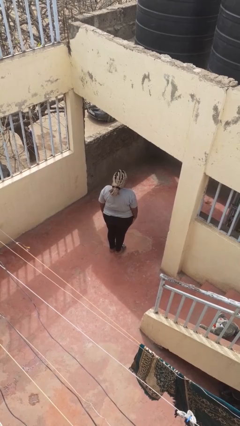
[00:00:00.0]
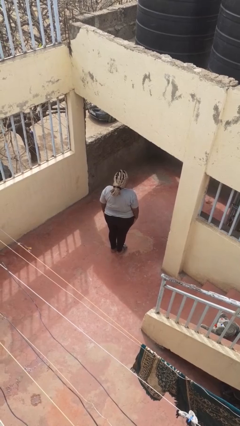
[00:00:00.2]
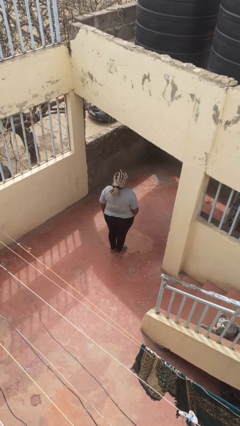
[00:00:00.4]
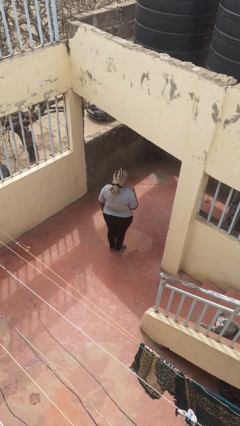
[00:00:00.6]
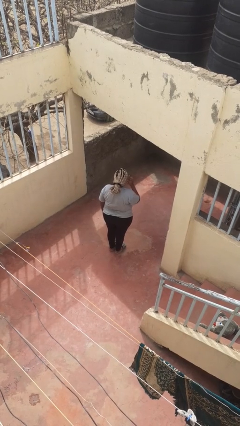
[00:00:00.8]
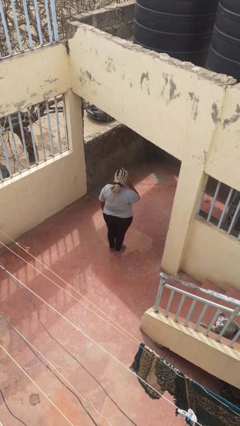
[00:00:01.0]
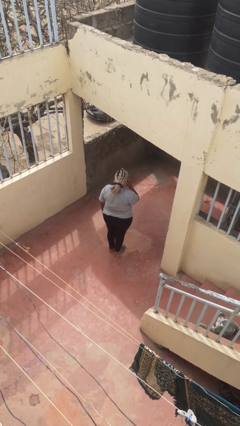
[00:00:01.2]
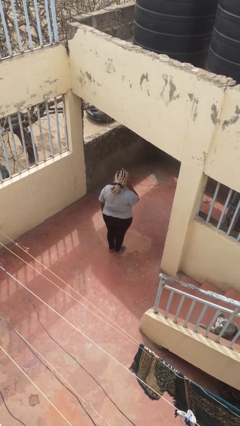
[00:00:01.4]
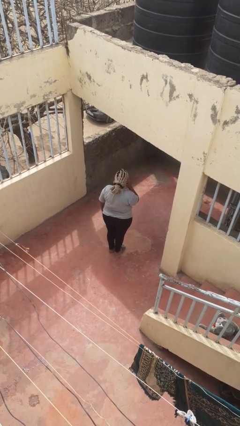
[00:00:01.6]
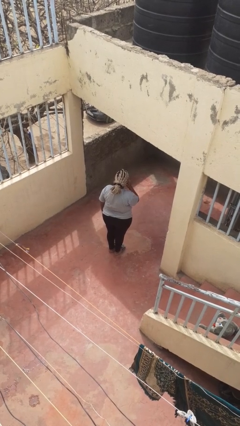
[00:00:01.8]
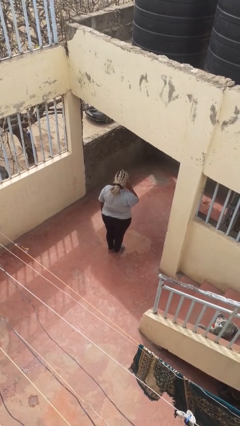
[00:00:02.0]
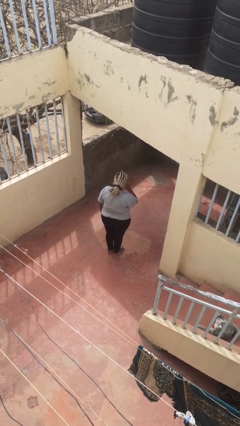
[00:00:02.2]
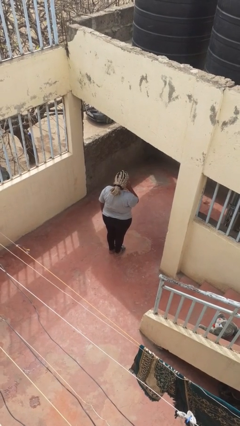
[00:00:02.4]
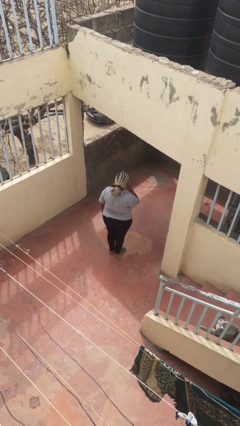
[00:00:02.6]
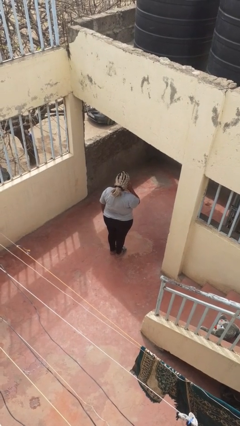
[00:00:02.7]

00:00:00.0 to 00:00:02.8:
person gestures listen closely

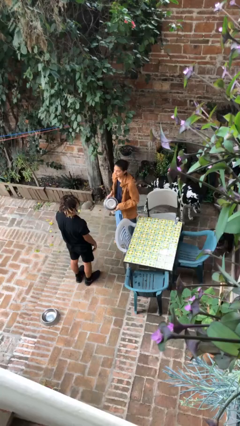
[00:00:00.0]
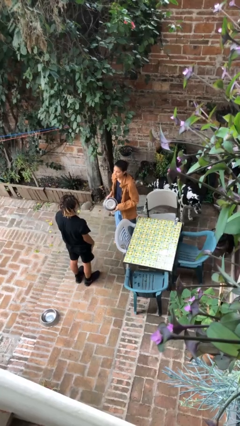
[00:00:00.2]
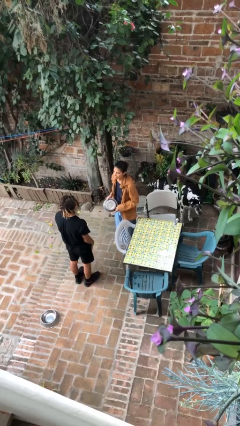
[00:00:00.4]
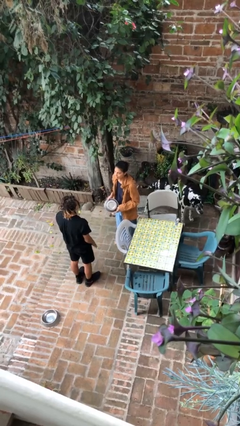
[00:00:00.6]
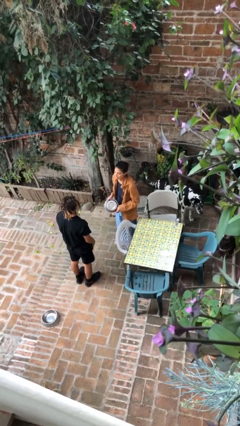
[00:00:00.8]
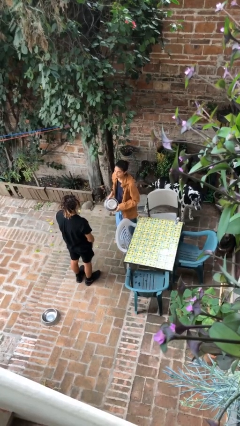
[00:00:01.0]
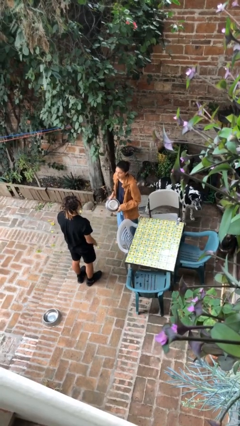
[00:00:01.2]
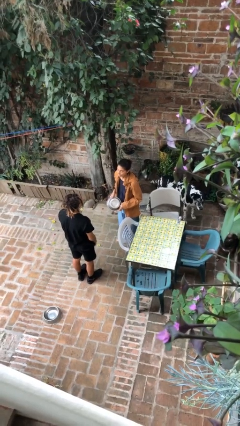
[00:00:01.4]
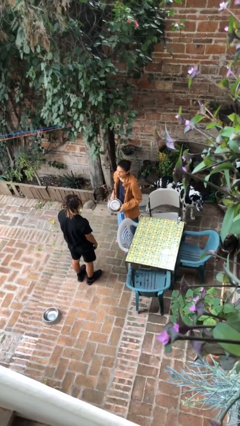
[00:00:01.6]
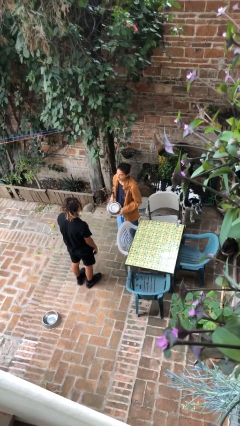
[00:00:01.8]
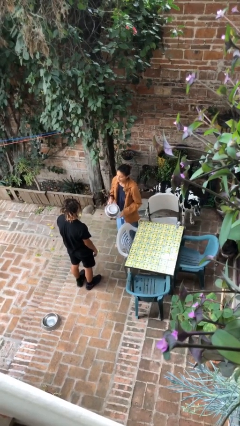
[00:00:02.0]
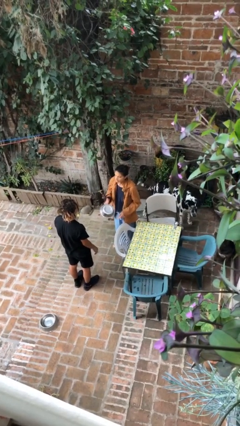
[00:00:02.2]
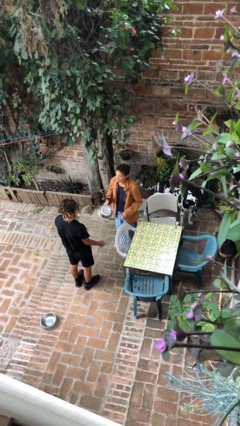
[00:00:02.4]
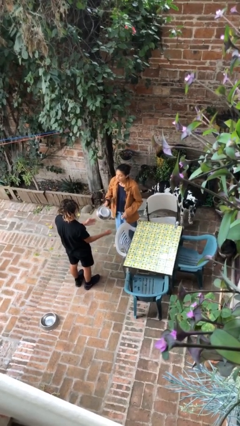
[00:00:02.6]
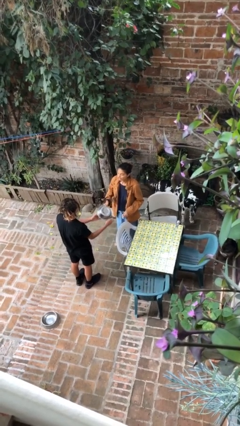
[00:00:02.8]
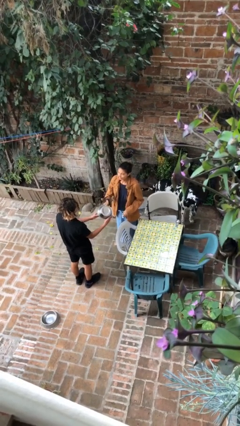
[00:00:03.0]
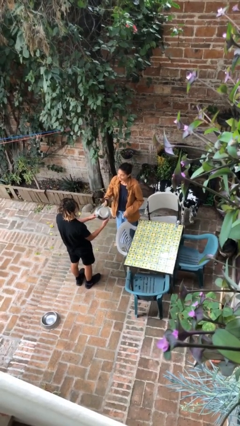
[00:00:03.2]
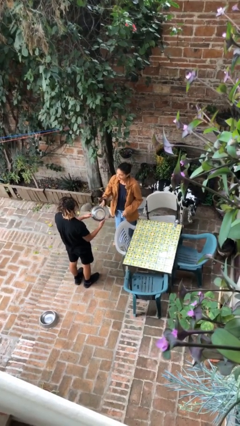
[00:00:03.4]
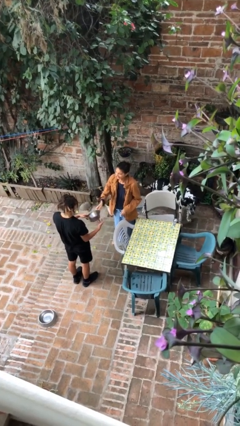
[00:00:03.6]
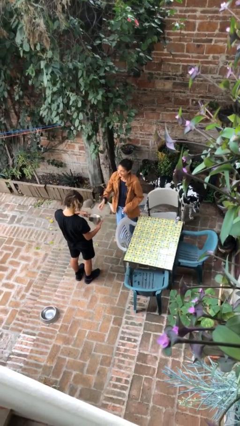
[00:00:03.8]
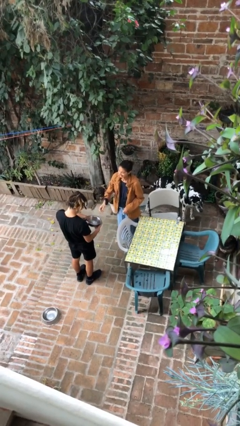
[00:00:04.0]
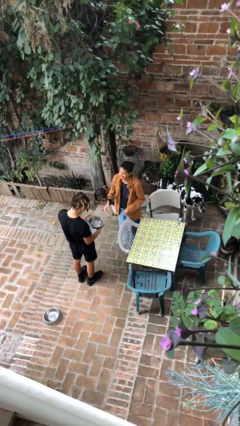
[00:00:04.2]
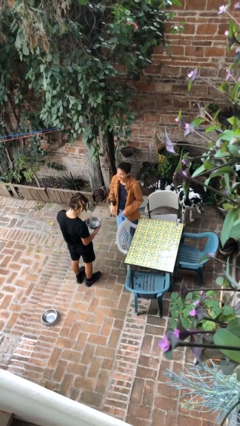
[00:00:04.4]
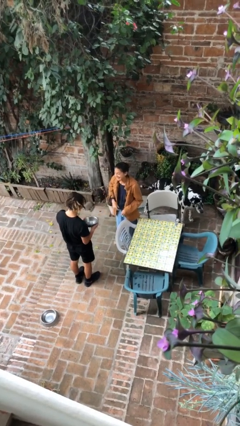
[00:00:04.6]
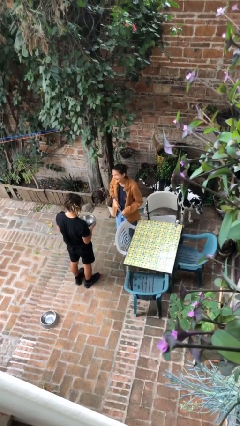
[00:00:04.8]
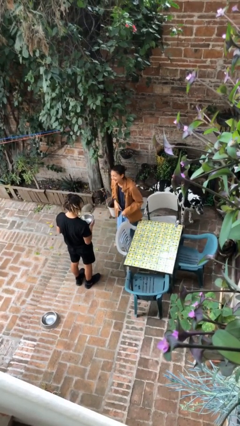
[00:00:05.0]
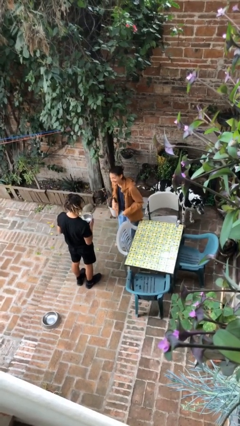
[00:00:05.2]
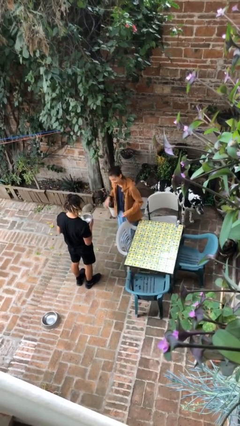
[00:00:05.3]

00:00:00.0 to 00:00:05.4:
person transfers object to person

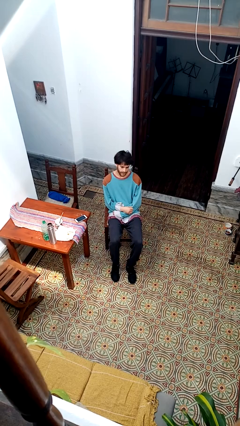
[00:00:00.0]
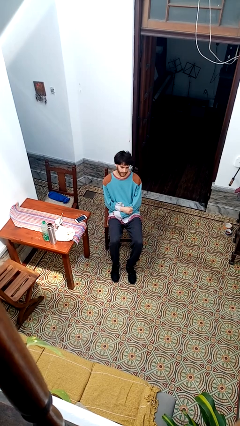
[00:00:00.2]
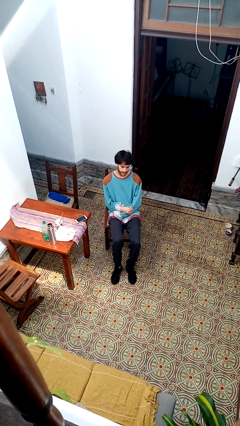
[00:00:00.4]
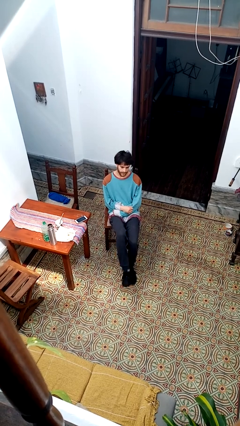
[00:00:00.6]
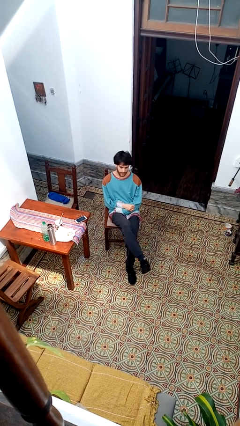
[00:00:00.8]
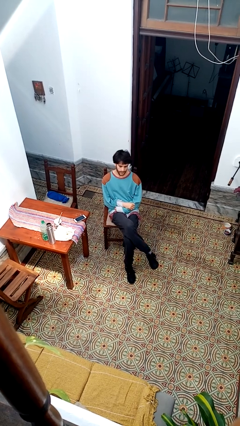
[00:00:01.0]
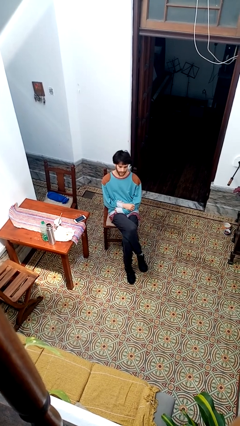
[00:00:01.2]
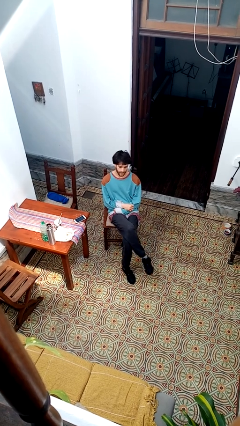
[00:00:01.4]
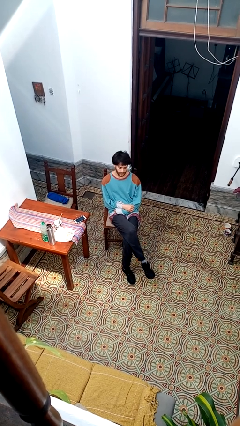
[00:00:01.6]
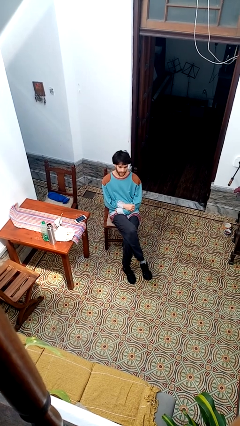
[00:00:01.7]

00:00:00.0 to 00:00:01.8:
person crosses legs

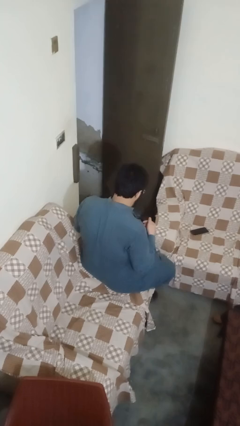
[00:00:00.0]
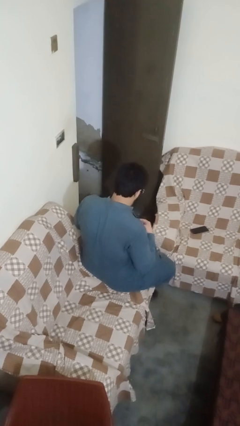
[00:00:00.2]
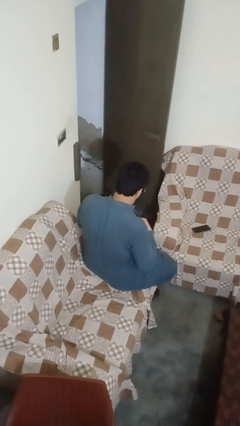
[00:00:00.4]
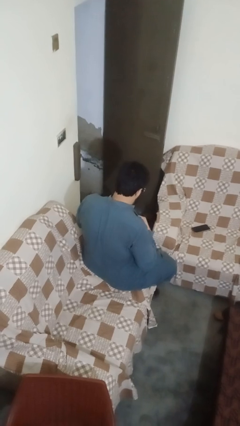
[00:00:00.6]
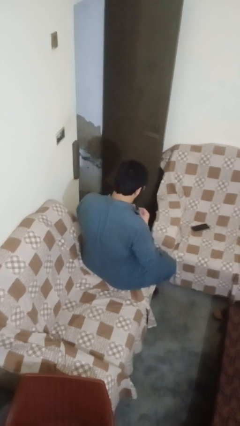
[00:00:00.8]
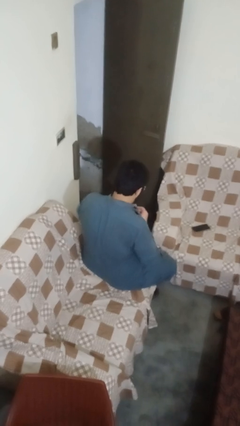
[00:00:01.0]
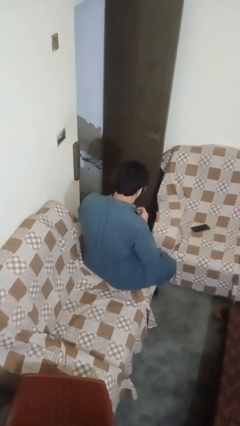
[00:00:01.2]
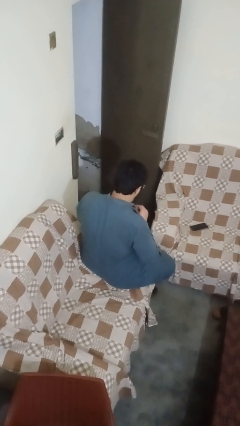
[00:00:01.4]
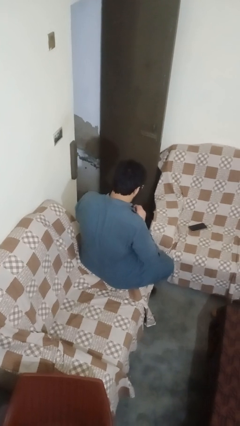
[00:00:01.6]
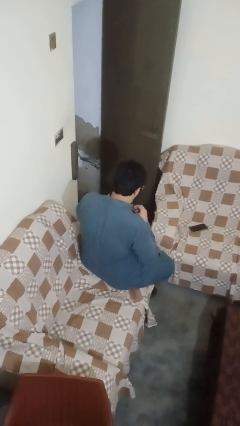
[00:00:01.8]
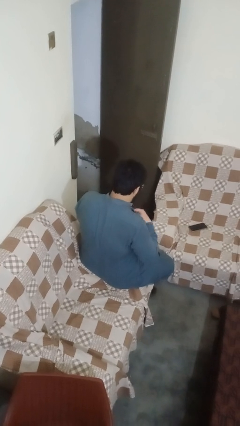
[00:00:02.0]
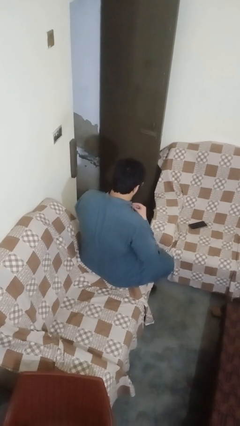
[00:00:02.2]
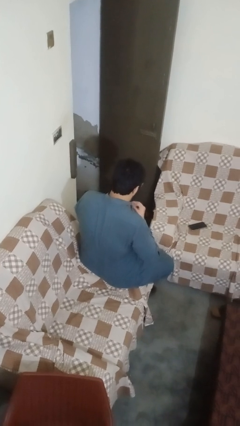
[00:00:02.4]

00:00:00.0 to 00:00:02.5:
person buttons shirt

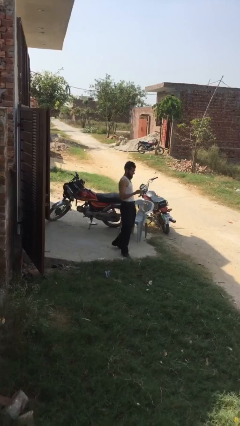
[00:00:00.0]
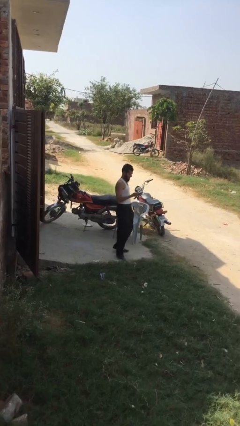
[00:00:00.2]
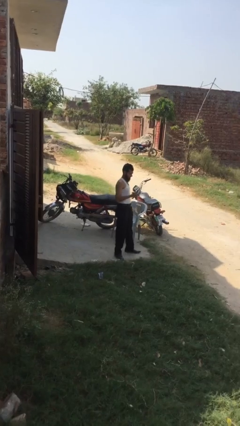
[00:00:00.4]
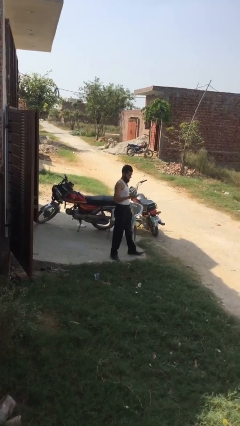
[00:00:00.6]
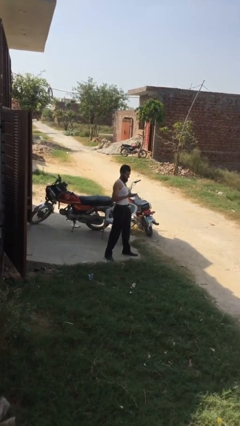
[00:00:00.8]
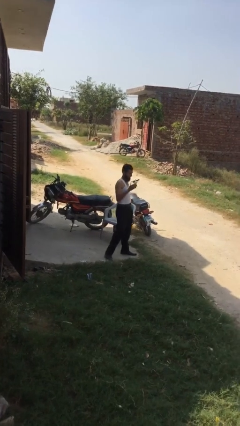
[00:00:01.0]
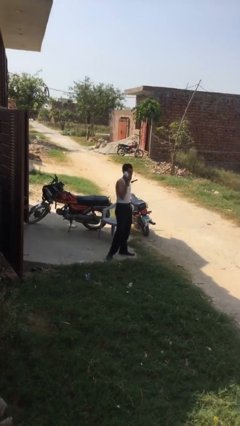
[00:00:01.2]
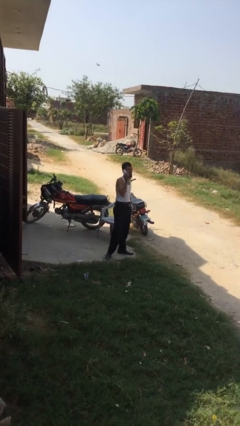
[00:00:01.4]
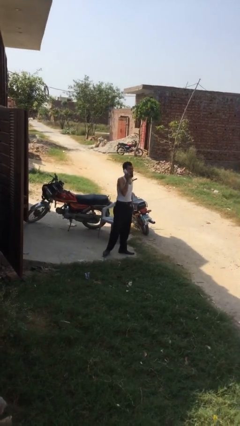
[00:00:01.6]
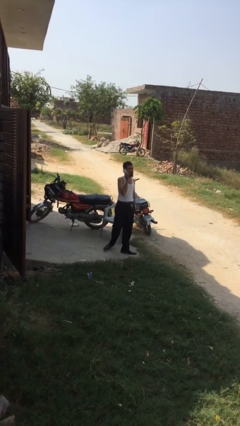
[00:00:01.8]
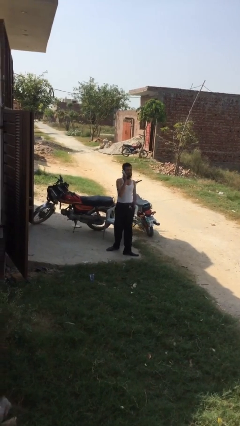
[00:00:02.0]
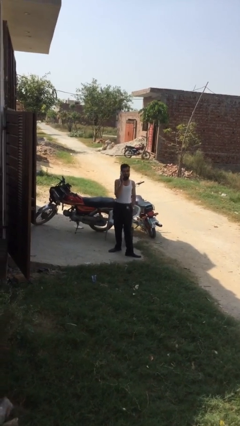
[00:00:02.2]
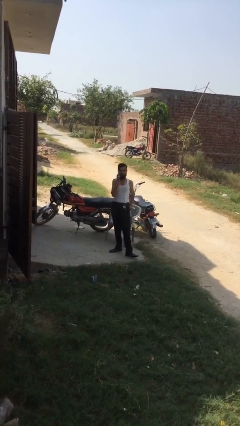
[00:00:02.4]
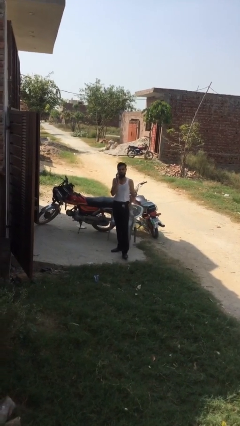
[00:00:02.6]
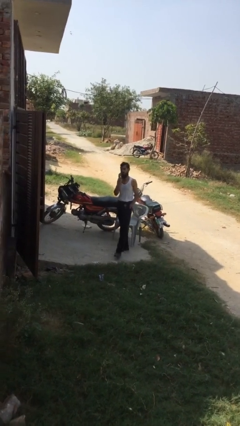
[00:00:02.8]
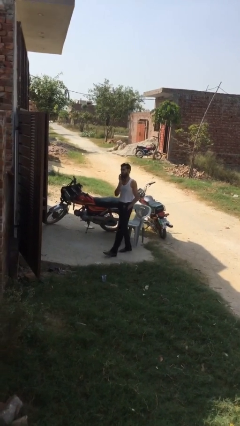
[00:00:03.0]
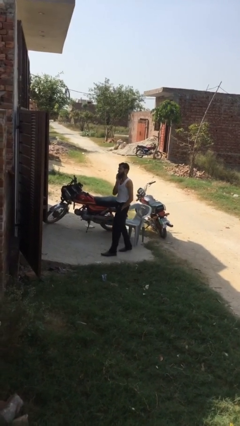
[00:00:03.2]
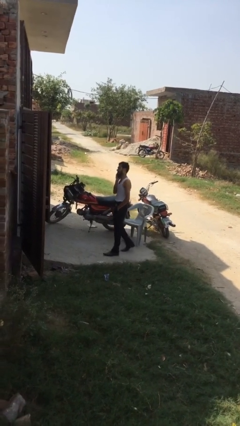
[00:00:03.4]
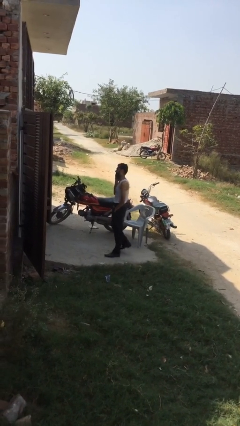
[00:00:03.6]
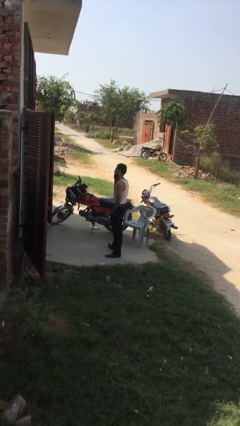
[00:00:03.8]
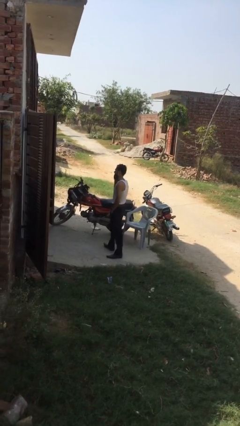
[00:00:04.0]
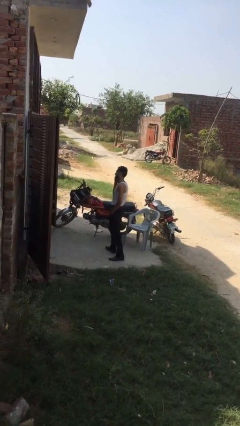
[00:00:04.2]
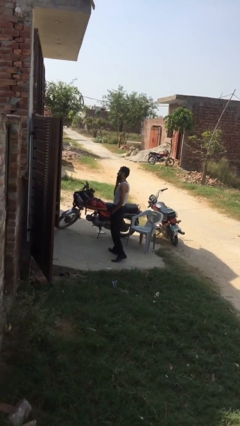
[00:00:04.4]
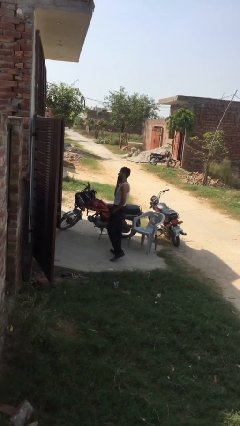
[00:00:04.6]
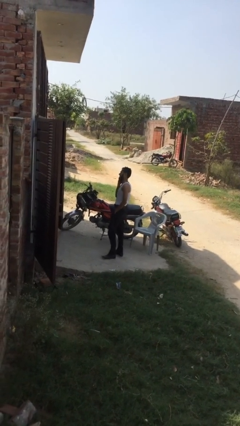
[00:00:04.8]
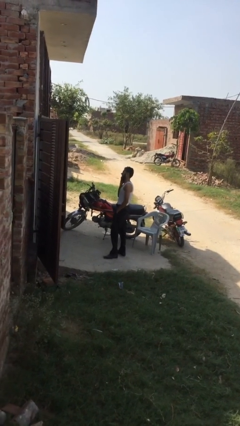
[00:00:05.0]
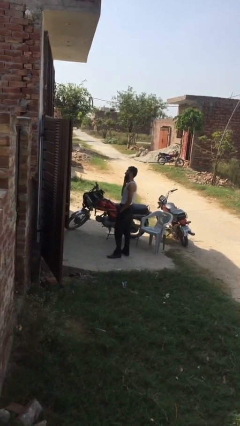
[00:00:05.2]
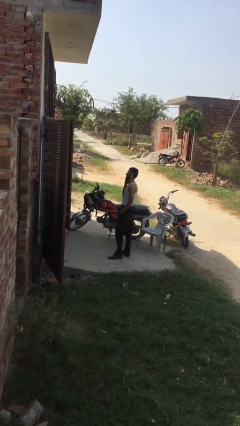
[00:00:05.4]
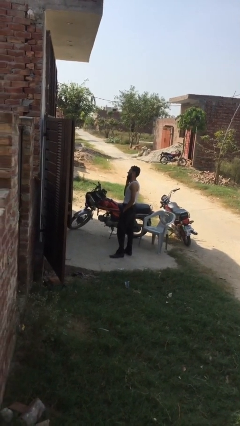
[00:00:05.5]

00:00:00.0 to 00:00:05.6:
person talks on phone
